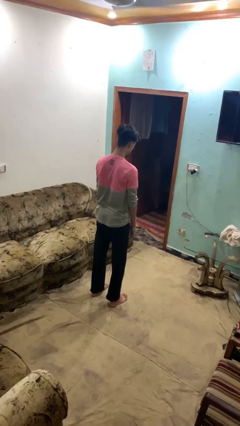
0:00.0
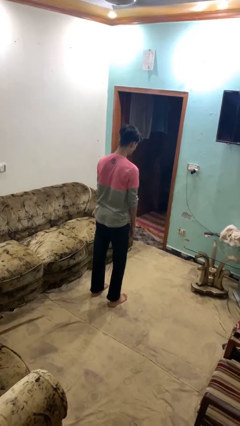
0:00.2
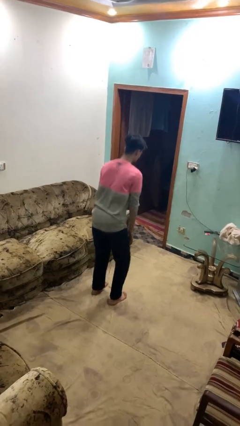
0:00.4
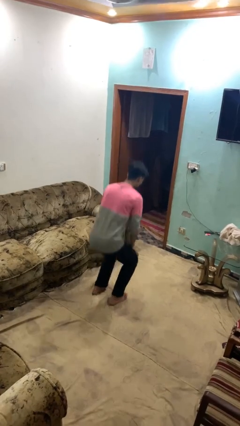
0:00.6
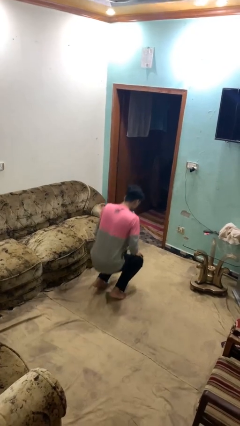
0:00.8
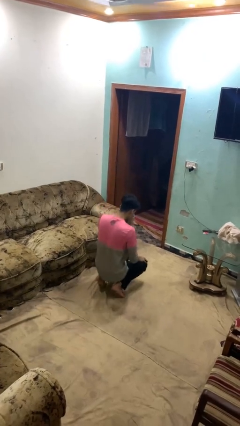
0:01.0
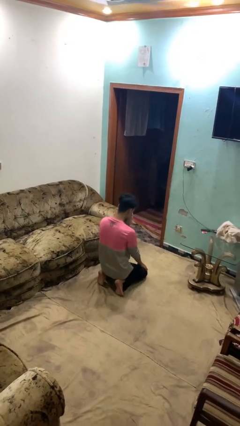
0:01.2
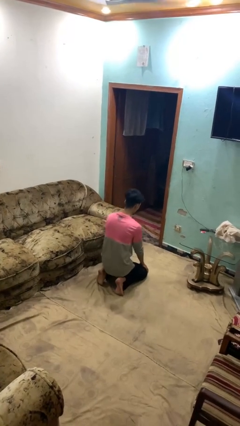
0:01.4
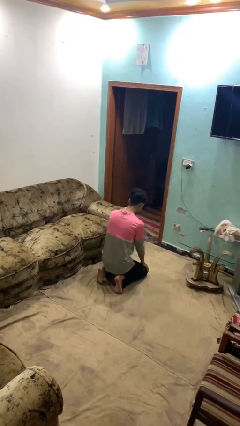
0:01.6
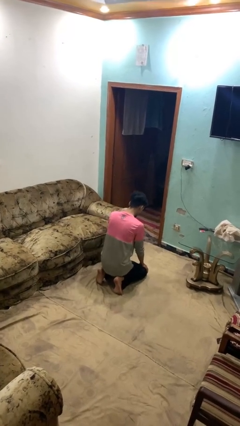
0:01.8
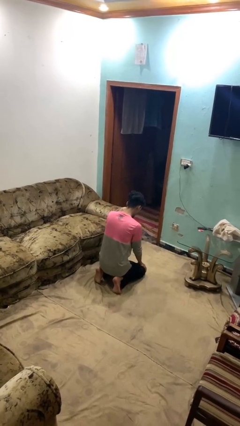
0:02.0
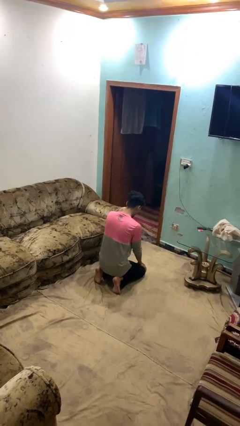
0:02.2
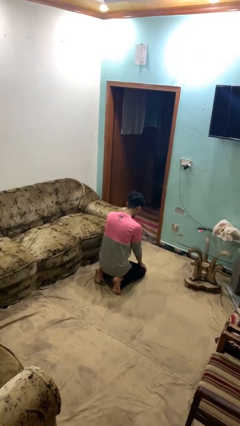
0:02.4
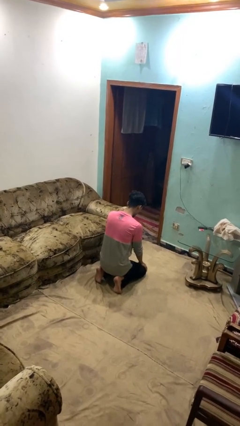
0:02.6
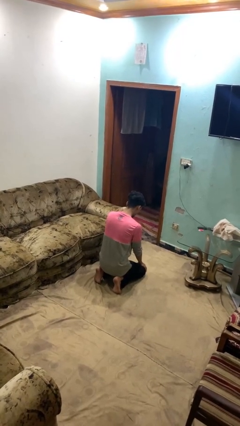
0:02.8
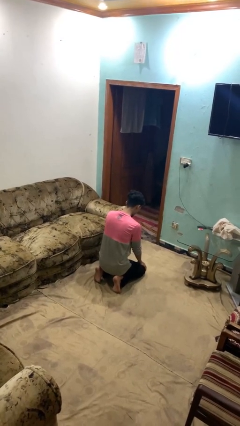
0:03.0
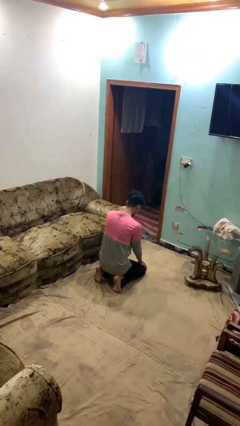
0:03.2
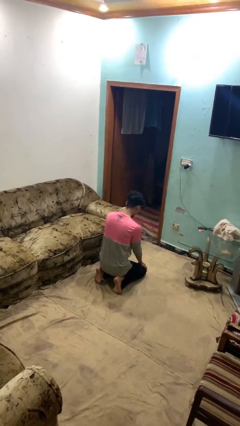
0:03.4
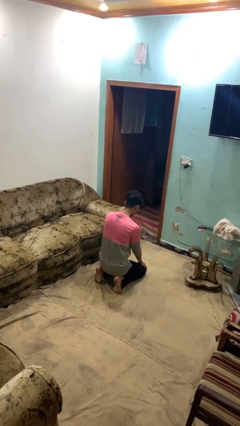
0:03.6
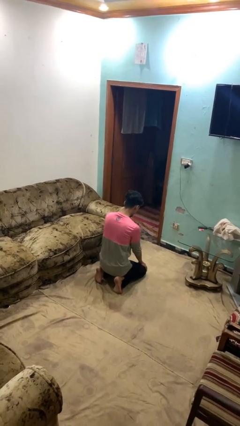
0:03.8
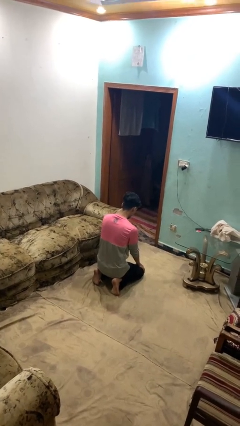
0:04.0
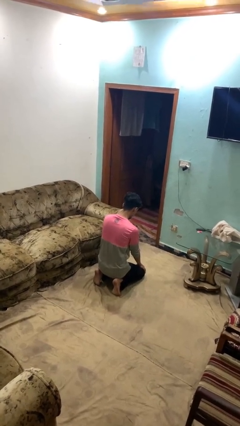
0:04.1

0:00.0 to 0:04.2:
person kneels

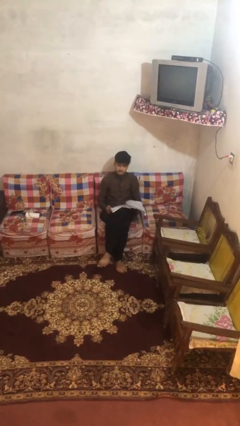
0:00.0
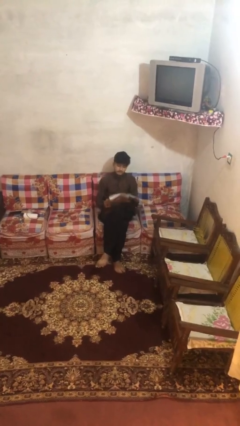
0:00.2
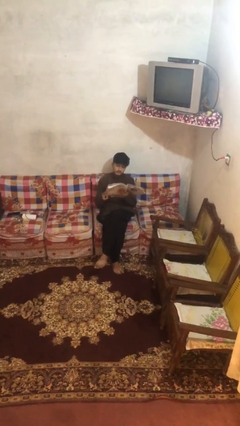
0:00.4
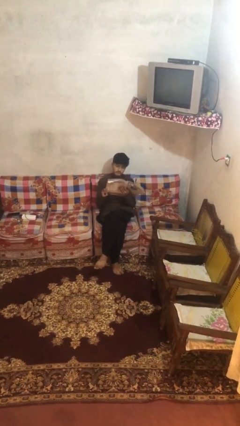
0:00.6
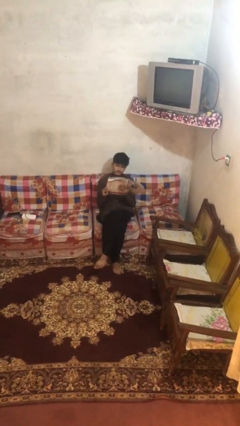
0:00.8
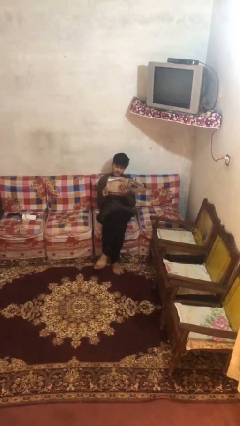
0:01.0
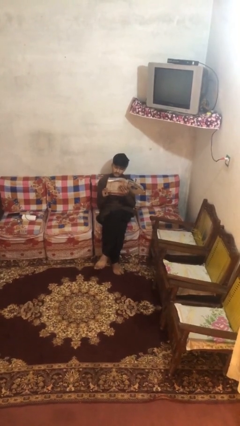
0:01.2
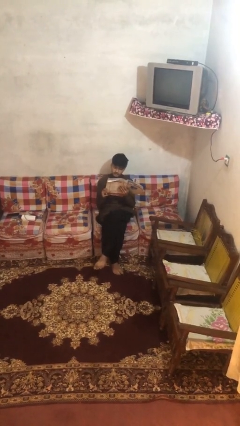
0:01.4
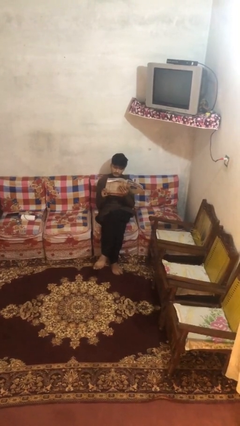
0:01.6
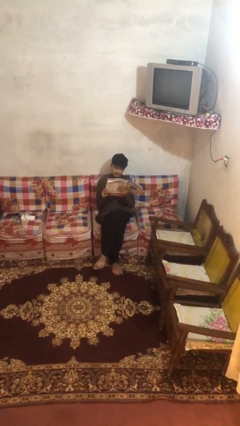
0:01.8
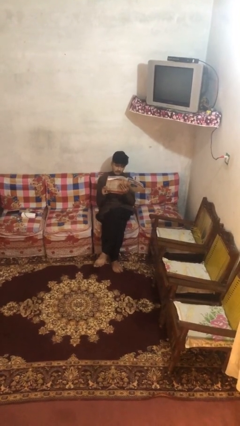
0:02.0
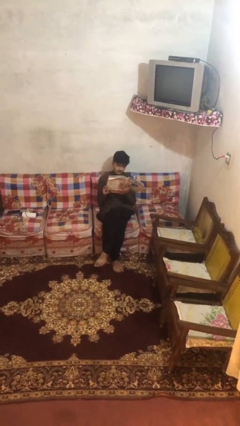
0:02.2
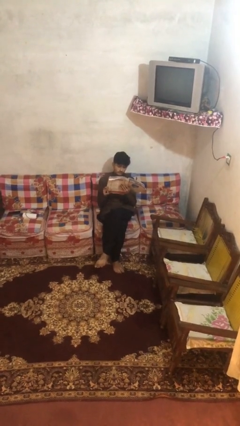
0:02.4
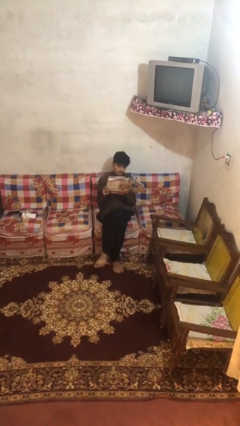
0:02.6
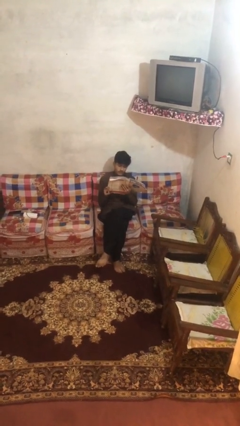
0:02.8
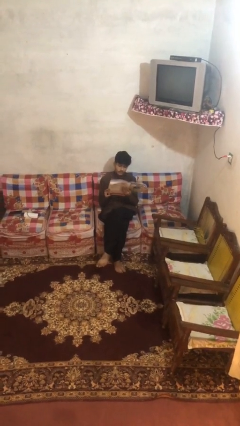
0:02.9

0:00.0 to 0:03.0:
person reads document

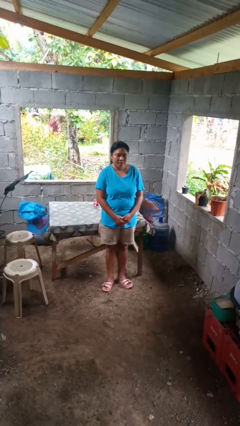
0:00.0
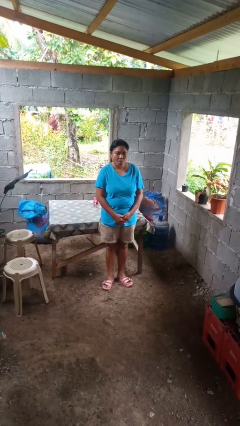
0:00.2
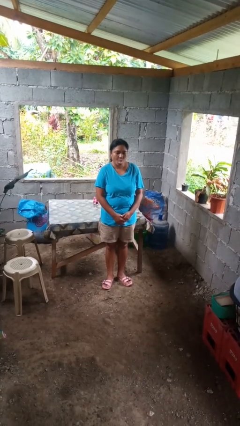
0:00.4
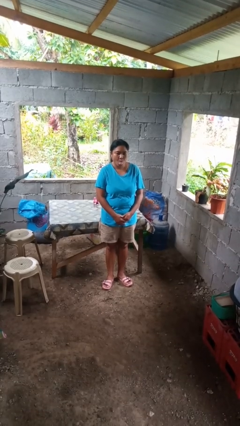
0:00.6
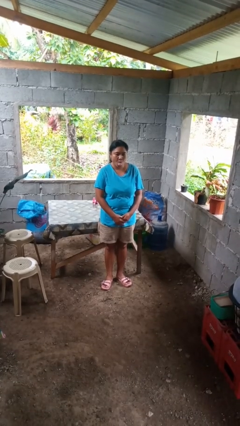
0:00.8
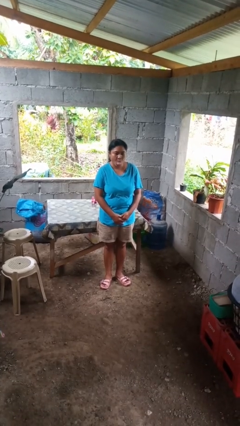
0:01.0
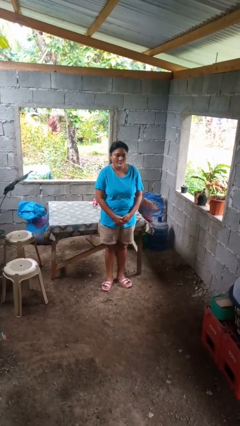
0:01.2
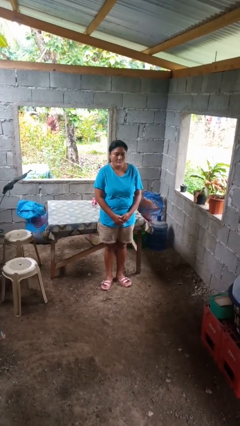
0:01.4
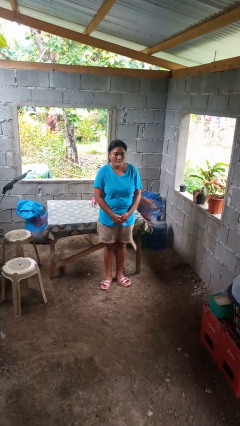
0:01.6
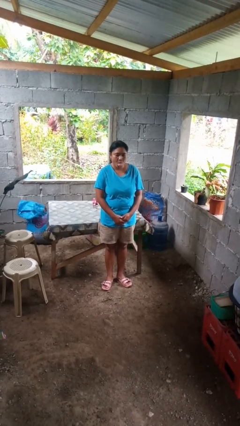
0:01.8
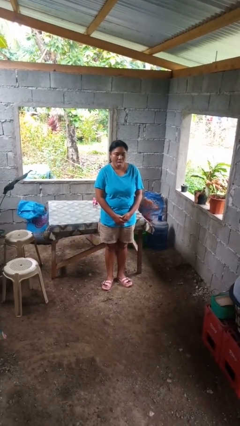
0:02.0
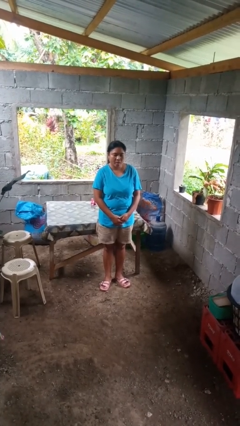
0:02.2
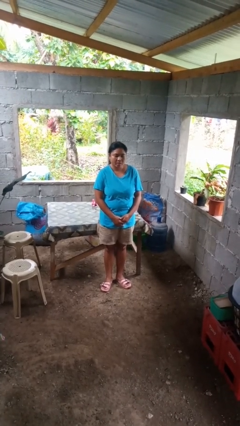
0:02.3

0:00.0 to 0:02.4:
person sticks out tongue

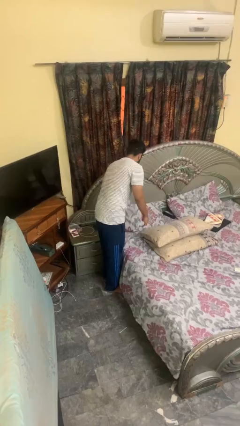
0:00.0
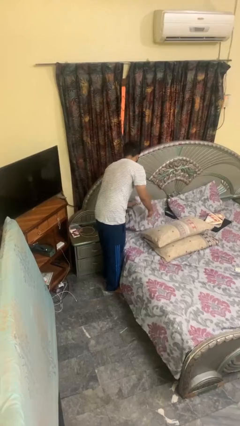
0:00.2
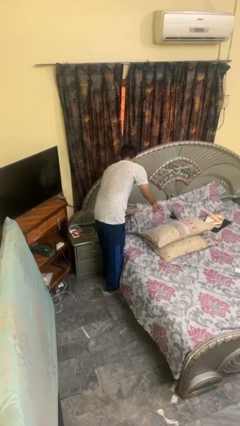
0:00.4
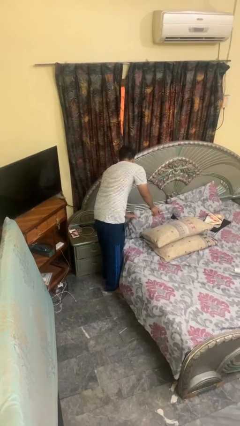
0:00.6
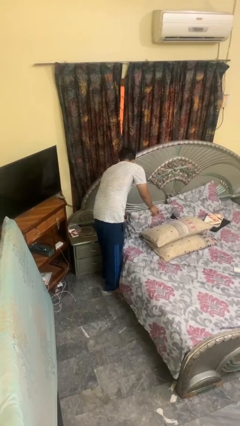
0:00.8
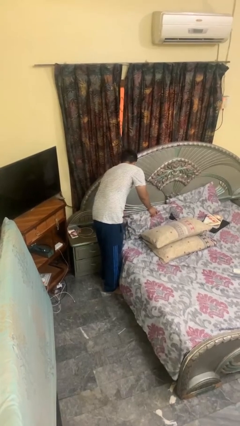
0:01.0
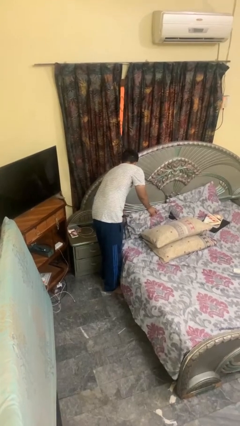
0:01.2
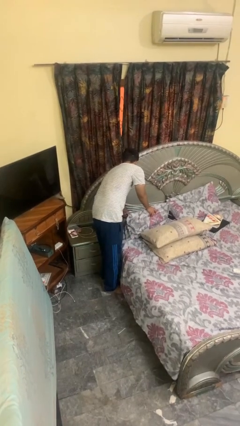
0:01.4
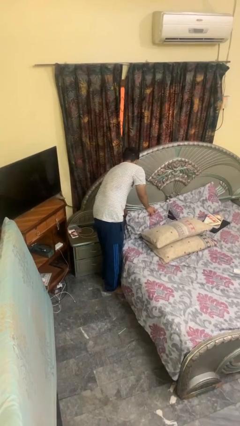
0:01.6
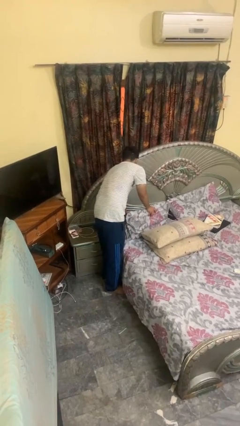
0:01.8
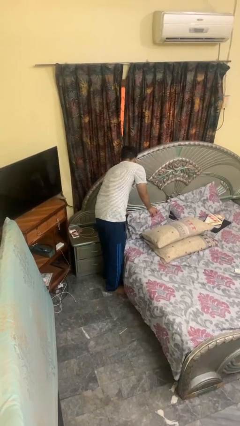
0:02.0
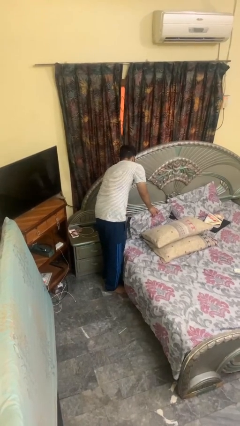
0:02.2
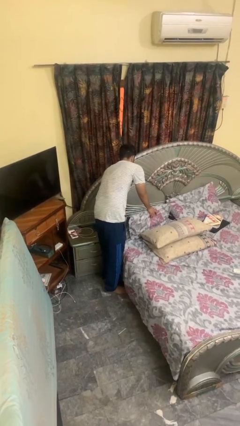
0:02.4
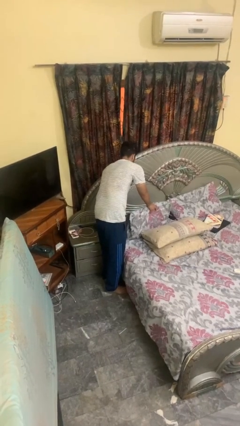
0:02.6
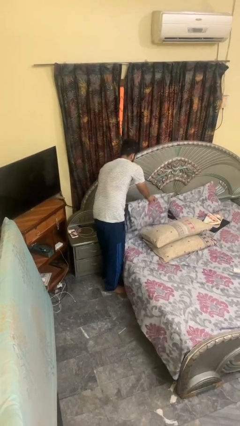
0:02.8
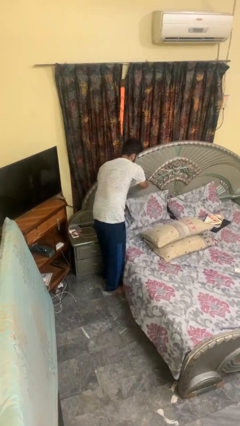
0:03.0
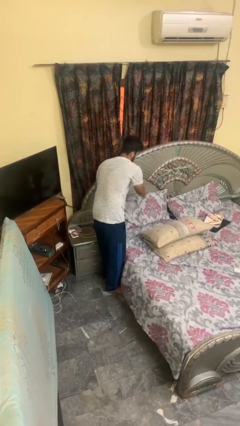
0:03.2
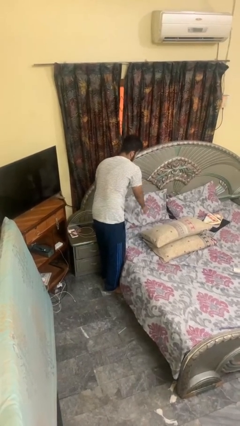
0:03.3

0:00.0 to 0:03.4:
person searches under bed

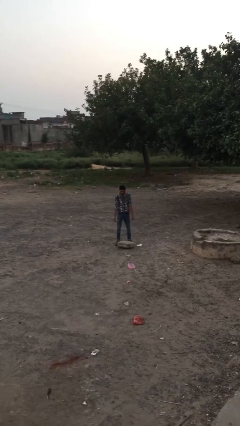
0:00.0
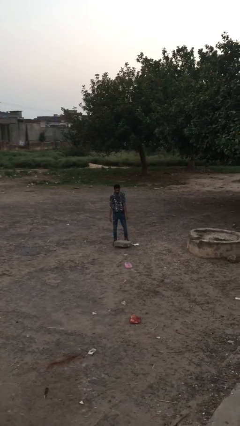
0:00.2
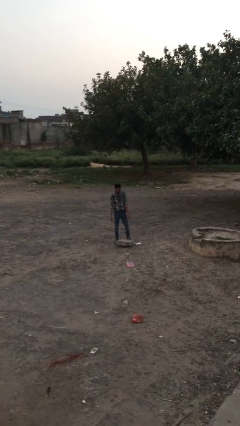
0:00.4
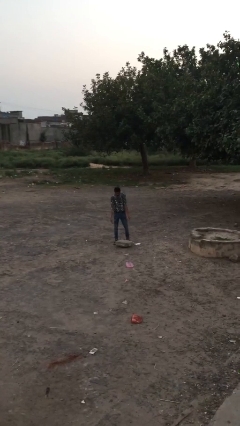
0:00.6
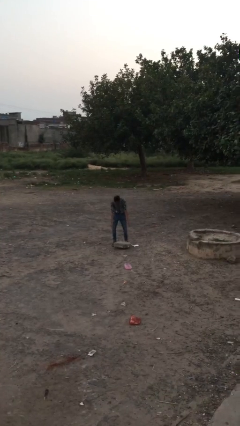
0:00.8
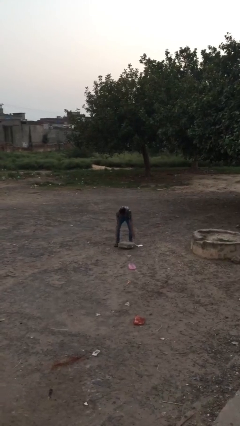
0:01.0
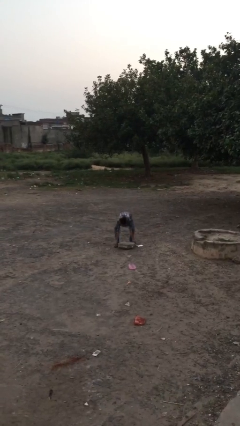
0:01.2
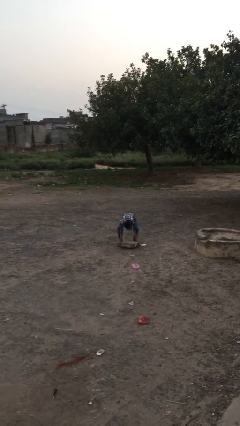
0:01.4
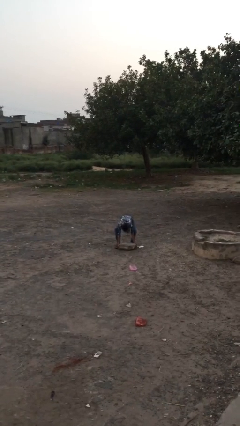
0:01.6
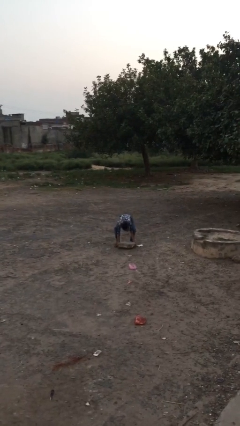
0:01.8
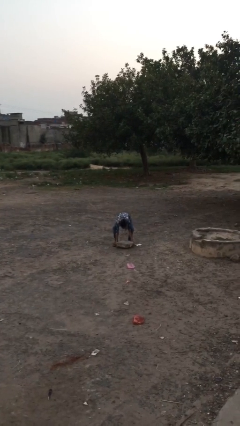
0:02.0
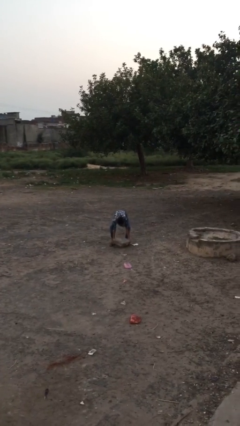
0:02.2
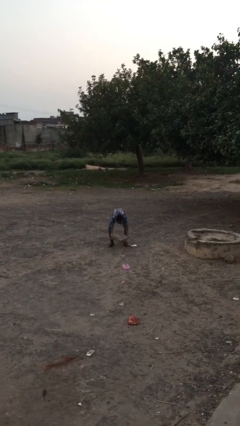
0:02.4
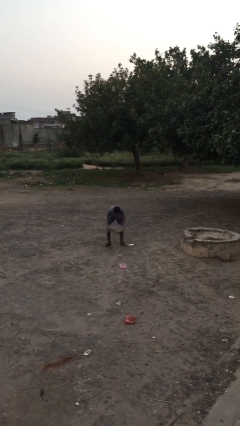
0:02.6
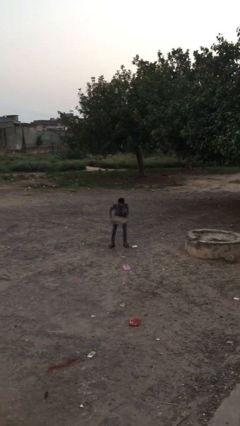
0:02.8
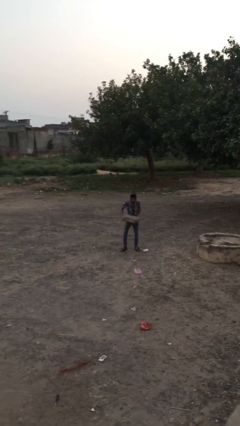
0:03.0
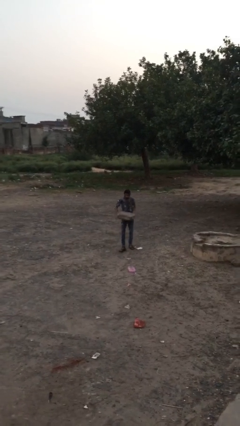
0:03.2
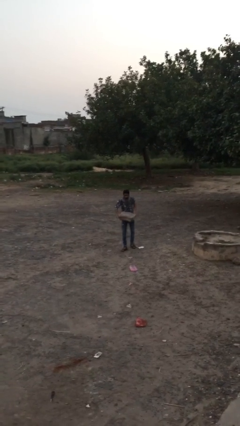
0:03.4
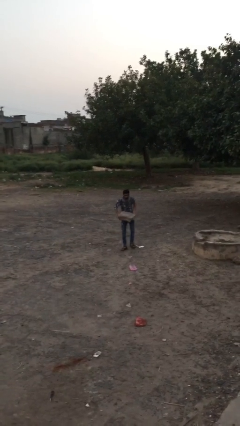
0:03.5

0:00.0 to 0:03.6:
person picks up object from floor

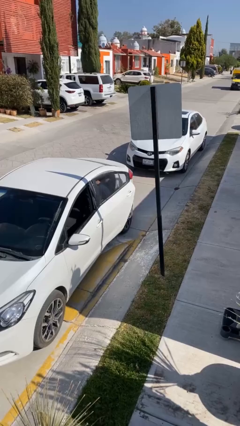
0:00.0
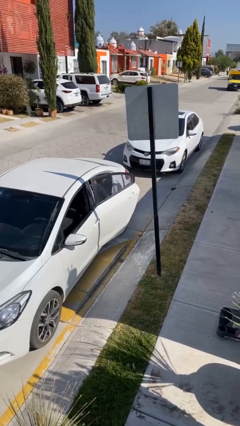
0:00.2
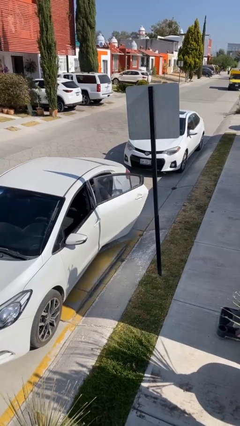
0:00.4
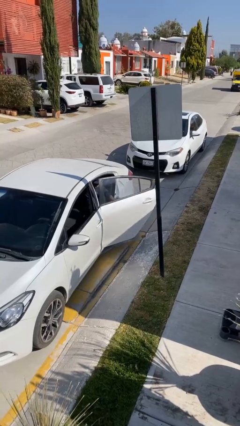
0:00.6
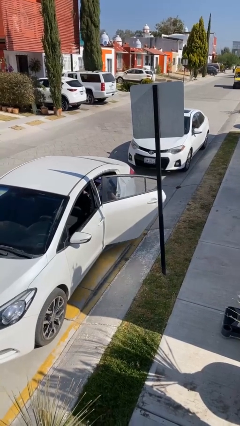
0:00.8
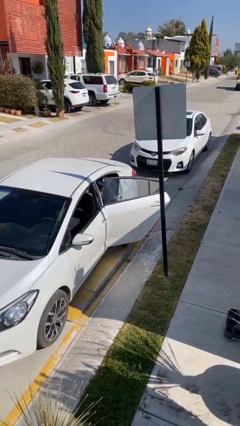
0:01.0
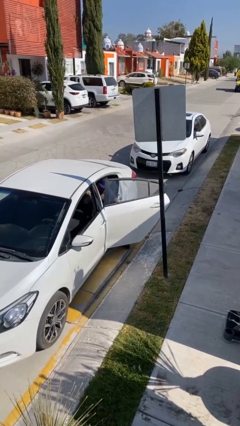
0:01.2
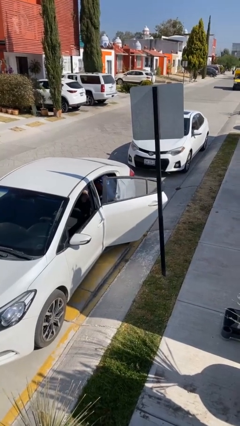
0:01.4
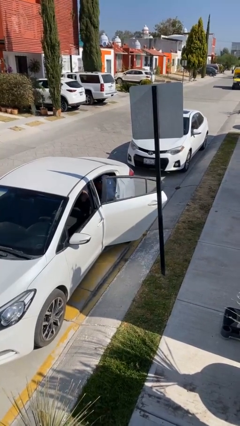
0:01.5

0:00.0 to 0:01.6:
person opens car door
